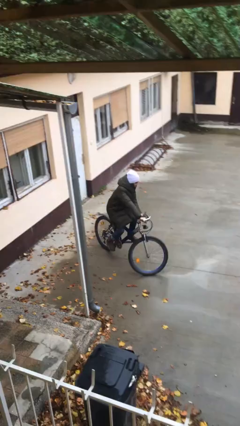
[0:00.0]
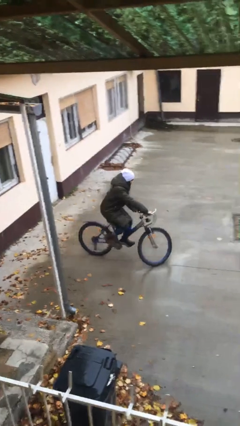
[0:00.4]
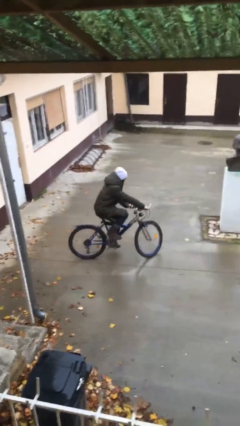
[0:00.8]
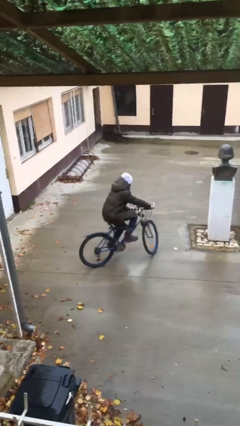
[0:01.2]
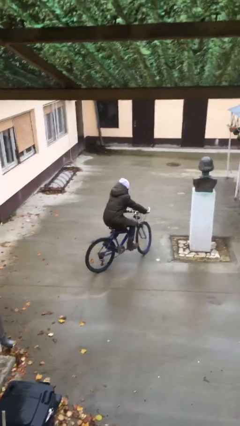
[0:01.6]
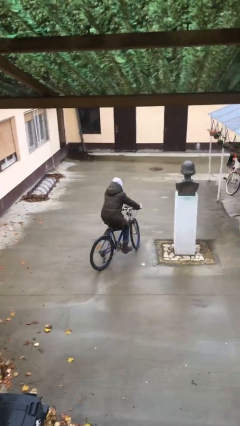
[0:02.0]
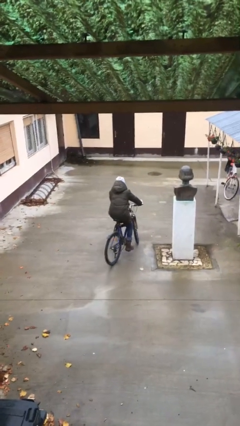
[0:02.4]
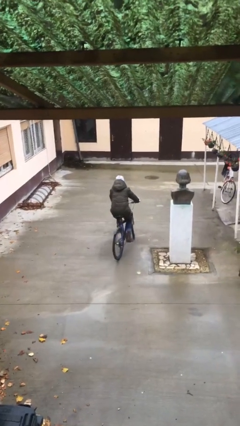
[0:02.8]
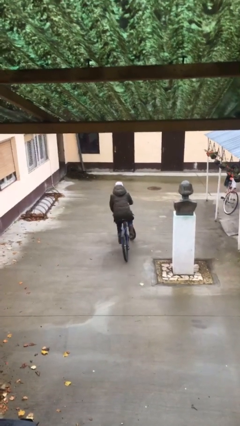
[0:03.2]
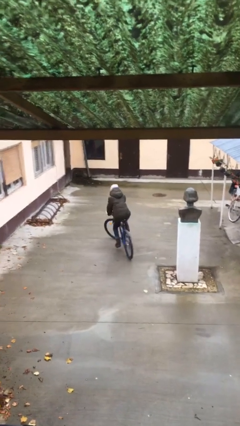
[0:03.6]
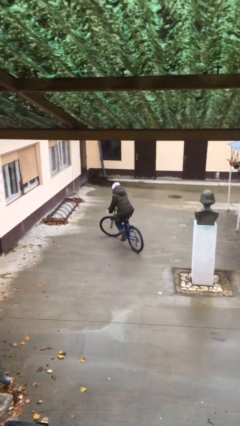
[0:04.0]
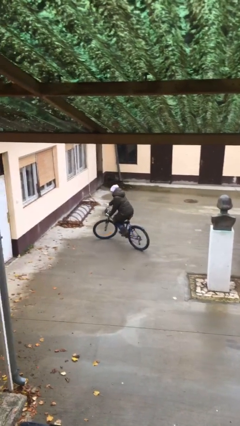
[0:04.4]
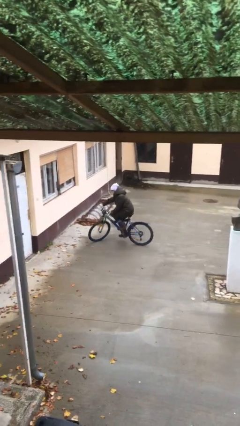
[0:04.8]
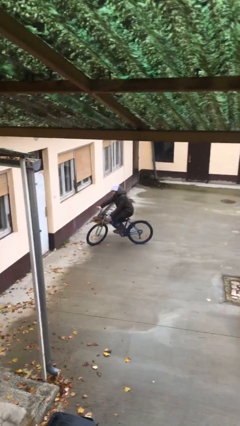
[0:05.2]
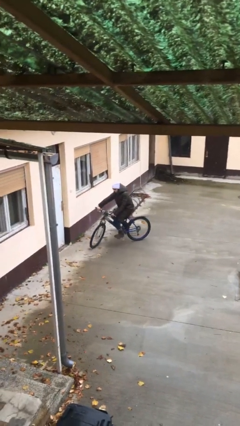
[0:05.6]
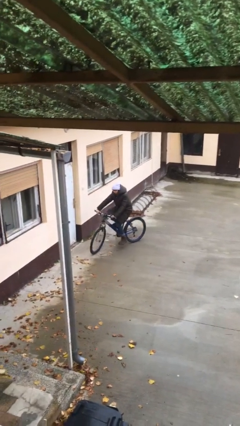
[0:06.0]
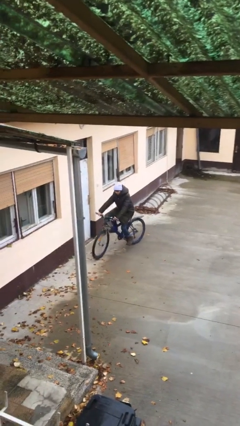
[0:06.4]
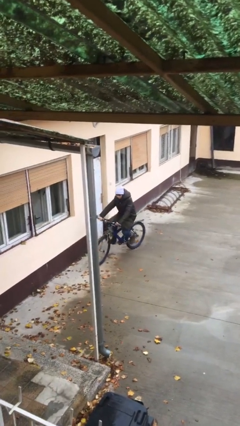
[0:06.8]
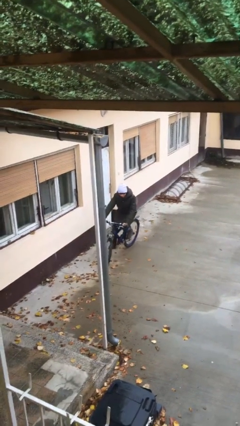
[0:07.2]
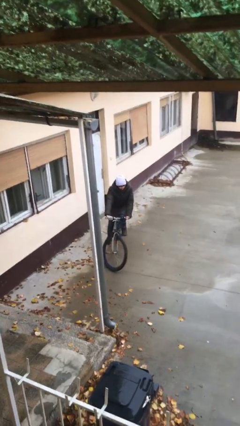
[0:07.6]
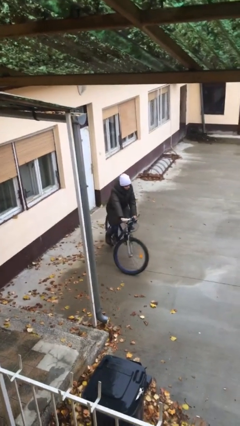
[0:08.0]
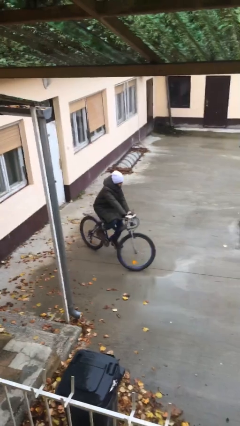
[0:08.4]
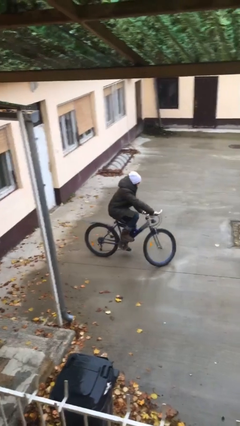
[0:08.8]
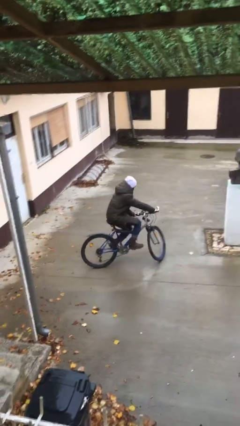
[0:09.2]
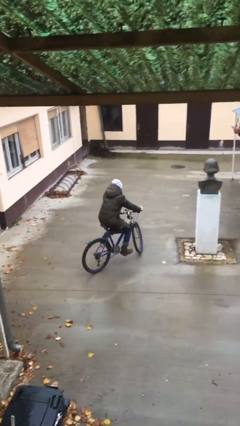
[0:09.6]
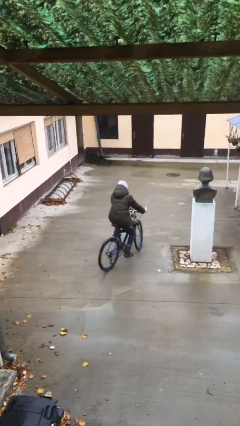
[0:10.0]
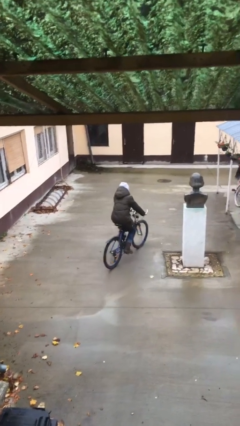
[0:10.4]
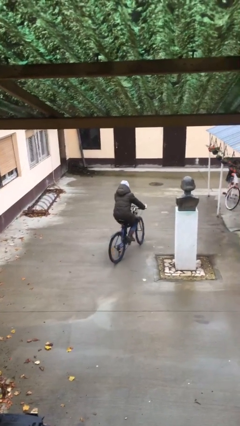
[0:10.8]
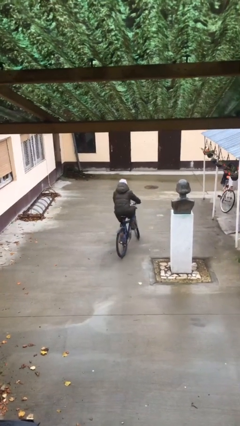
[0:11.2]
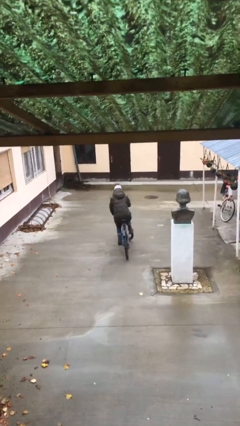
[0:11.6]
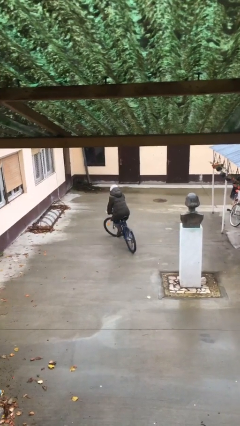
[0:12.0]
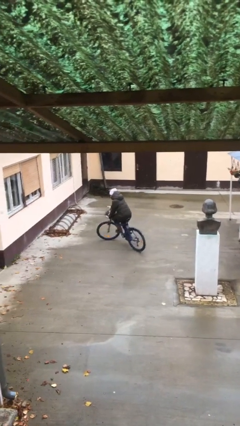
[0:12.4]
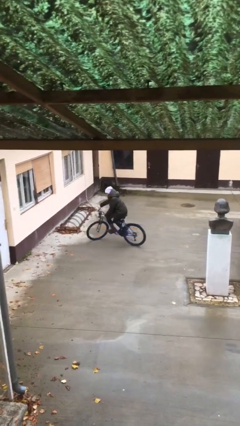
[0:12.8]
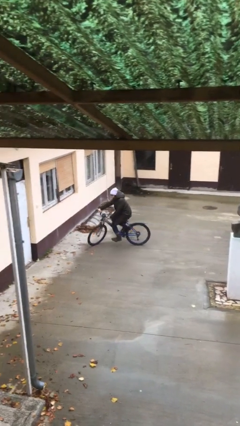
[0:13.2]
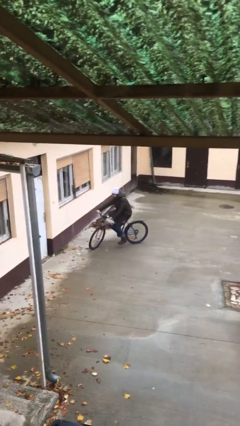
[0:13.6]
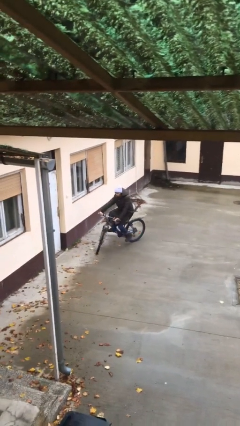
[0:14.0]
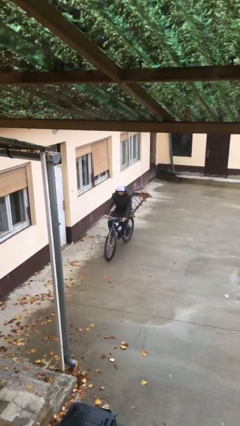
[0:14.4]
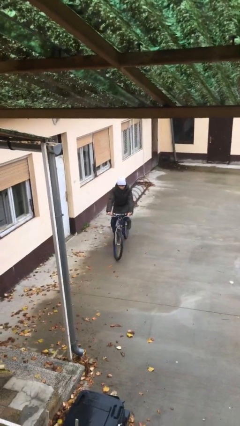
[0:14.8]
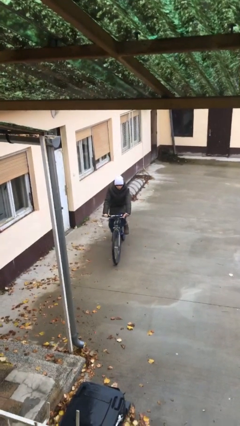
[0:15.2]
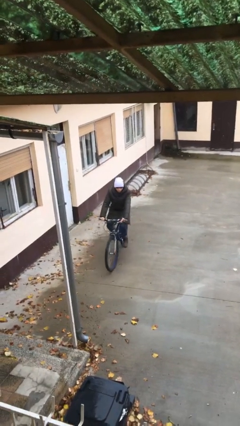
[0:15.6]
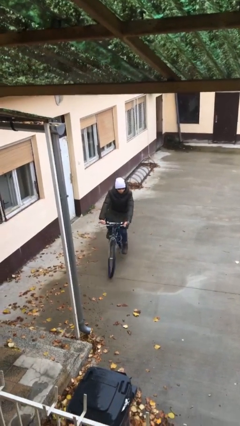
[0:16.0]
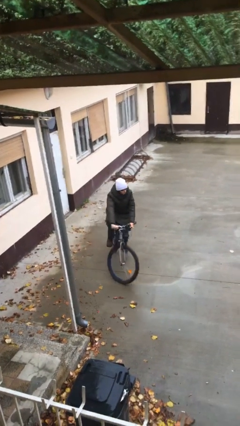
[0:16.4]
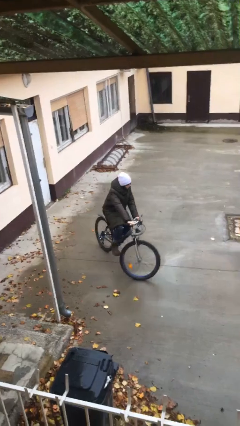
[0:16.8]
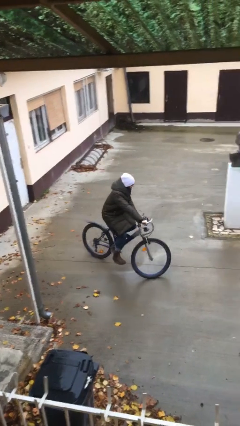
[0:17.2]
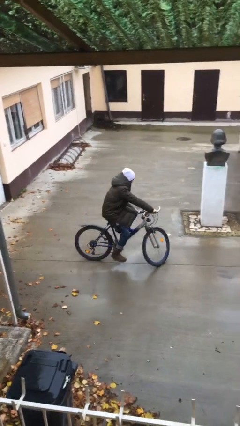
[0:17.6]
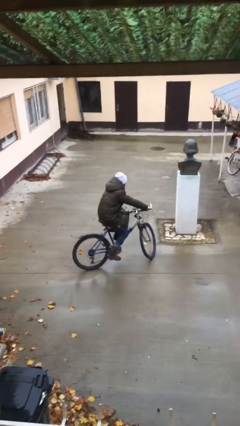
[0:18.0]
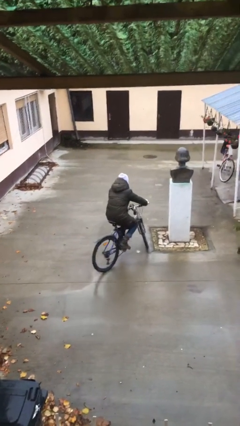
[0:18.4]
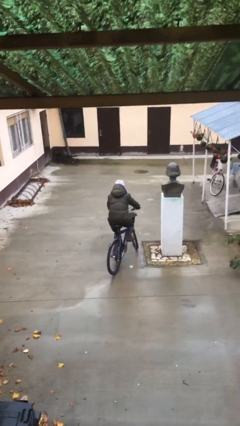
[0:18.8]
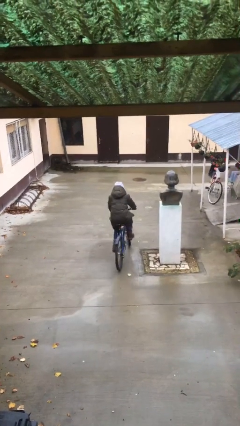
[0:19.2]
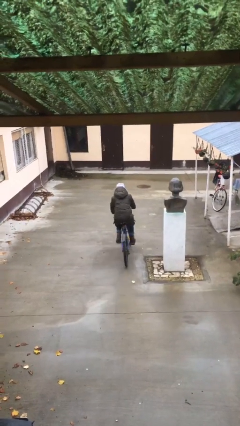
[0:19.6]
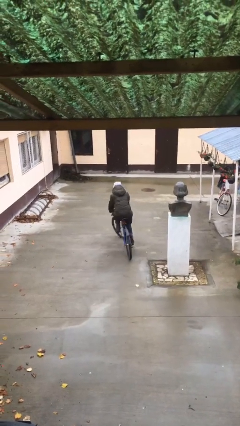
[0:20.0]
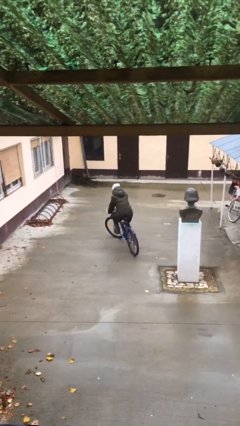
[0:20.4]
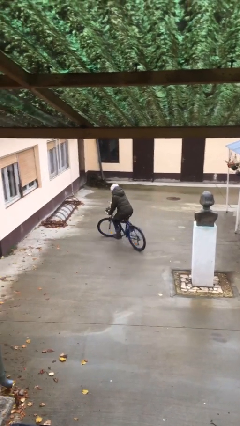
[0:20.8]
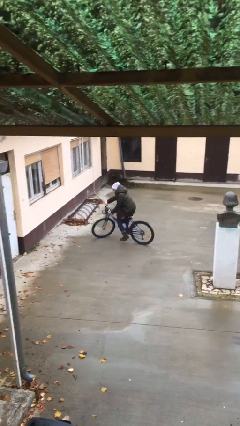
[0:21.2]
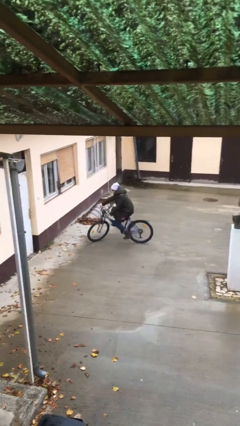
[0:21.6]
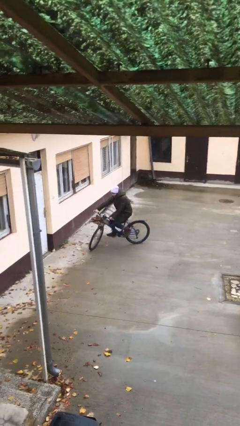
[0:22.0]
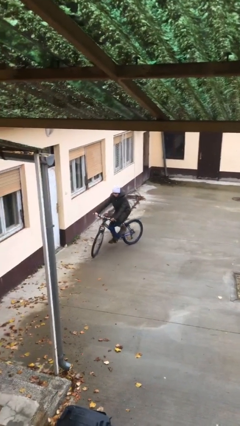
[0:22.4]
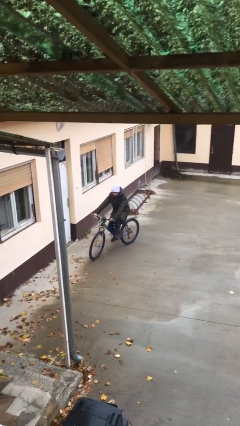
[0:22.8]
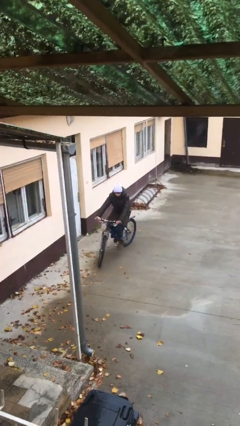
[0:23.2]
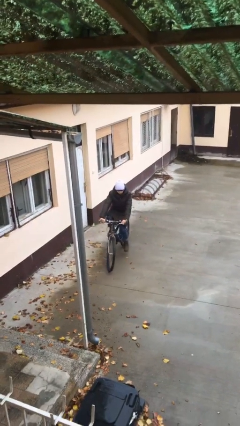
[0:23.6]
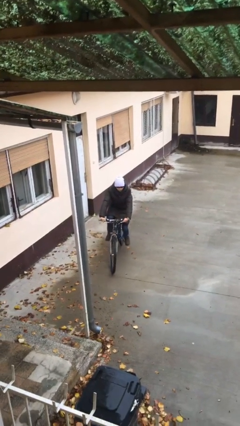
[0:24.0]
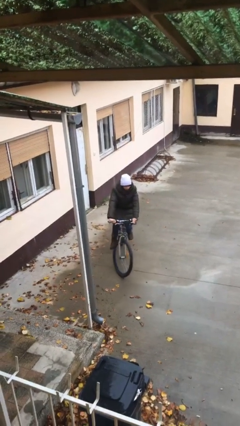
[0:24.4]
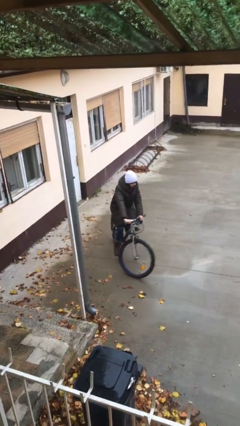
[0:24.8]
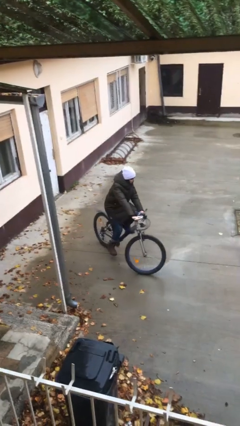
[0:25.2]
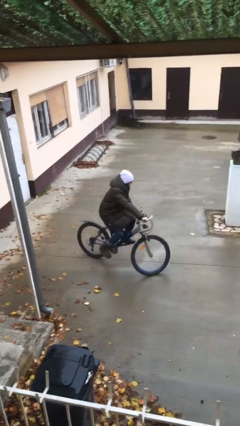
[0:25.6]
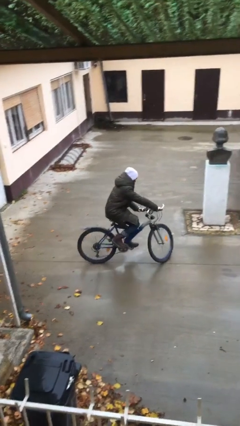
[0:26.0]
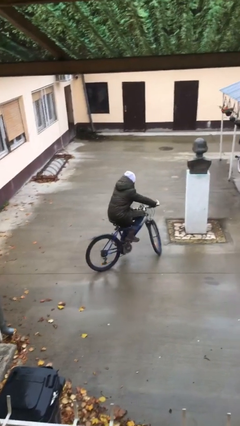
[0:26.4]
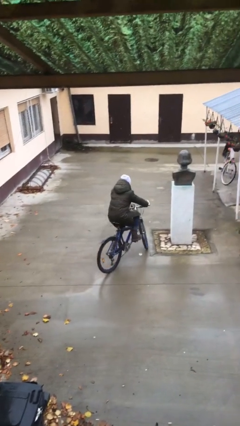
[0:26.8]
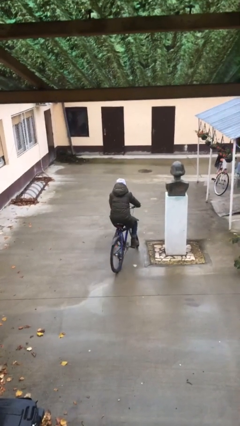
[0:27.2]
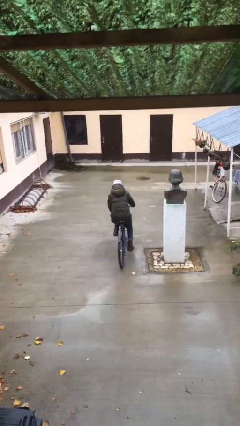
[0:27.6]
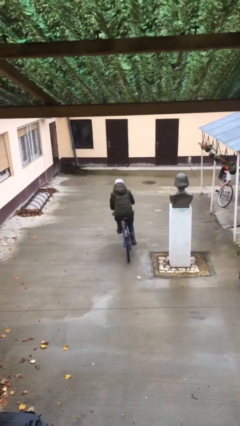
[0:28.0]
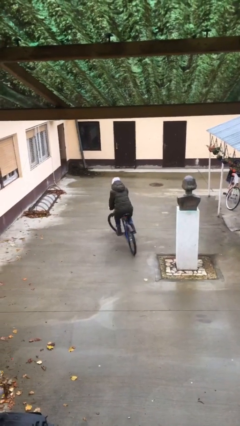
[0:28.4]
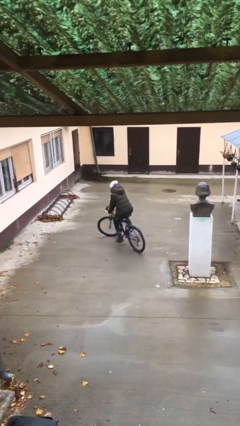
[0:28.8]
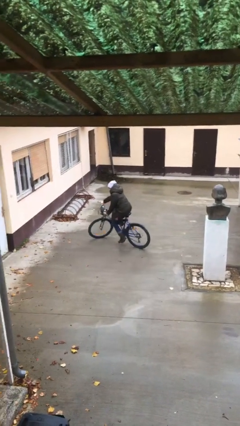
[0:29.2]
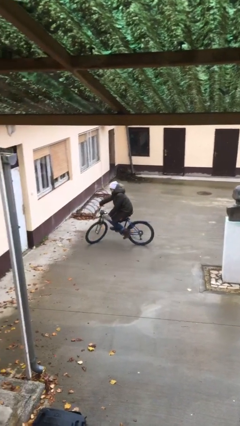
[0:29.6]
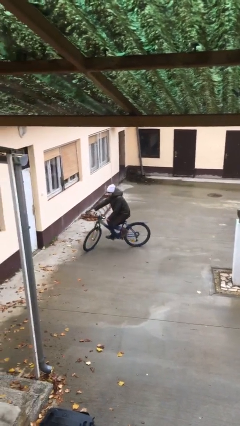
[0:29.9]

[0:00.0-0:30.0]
person rides bicycle

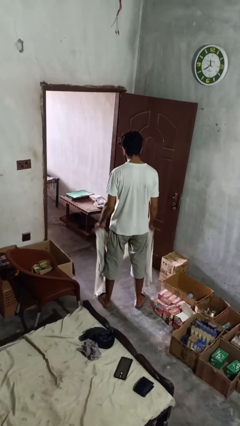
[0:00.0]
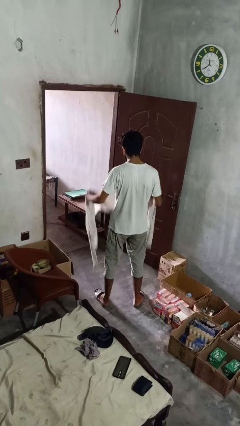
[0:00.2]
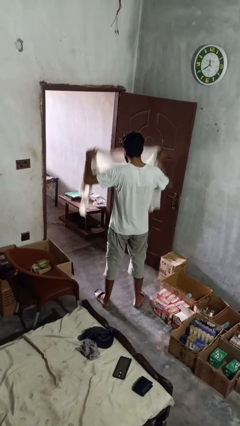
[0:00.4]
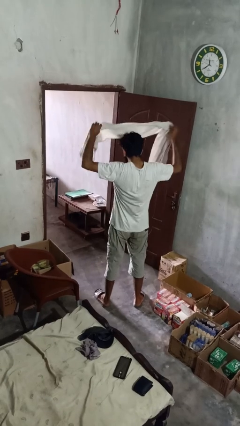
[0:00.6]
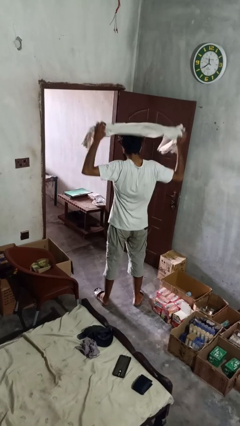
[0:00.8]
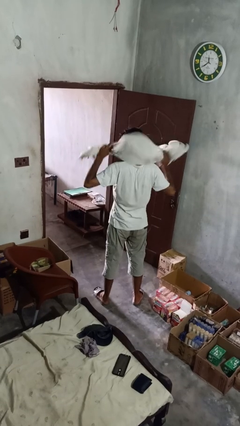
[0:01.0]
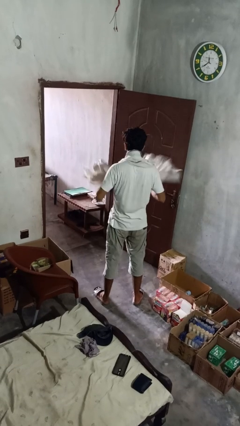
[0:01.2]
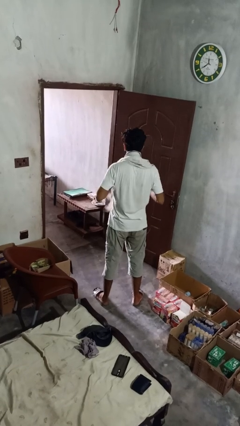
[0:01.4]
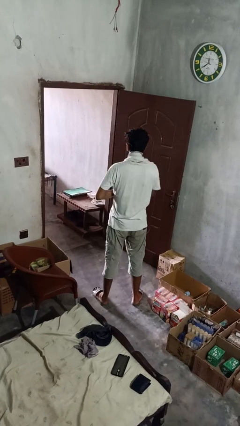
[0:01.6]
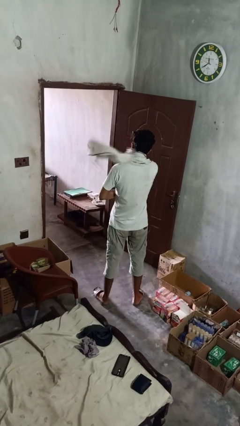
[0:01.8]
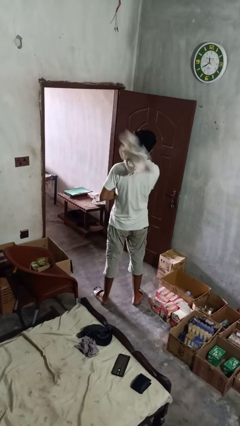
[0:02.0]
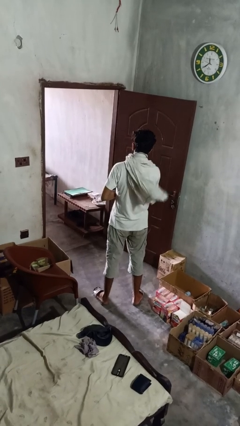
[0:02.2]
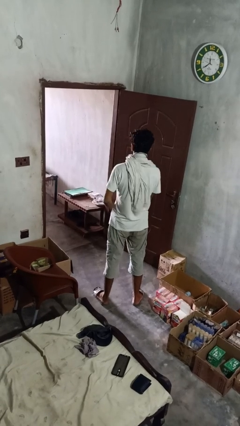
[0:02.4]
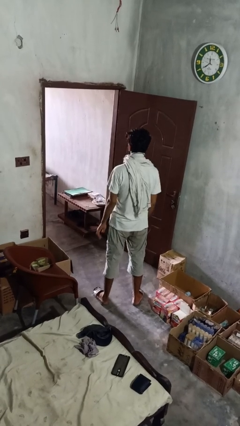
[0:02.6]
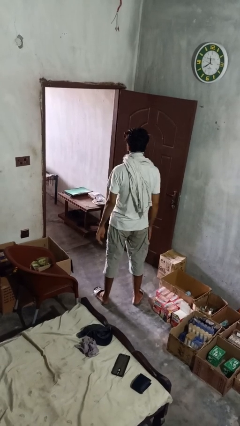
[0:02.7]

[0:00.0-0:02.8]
person puts on scarf

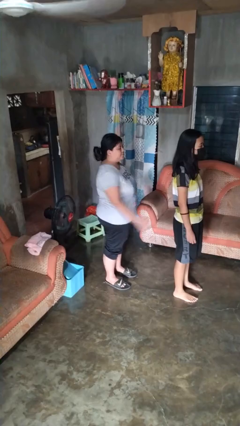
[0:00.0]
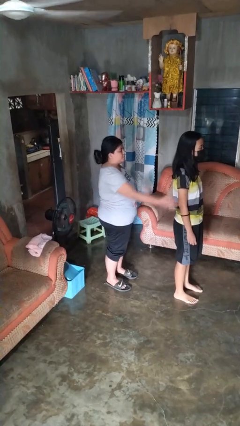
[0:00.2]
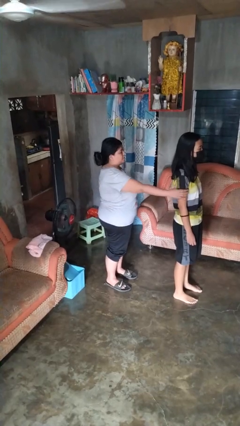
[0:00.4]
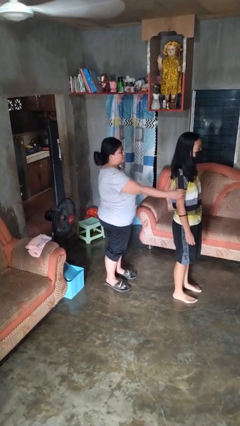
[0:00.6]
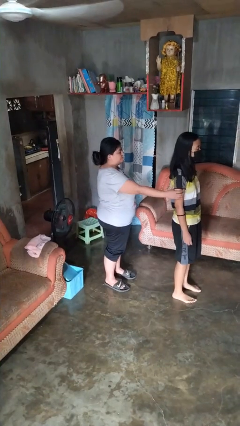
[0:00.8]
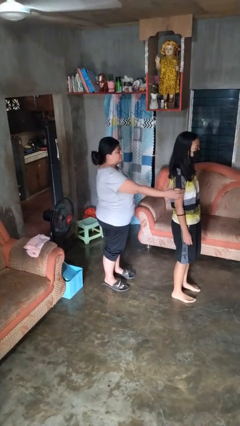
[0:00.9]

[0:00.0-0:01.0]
person grabs person by shoulder
